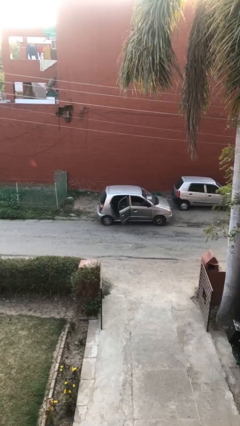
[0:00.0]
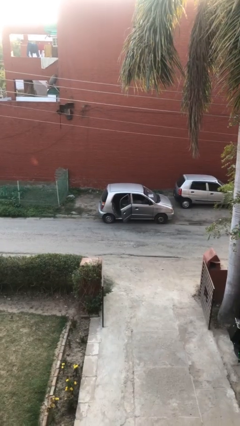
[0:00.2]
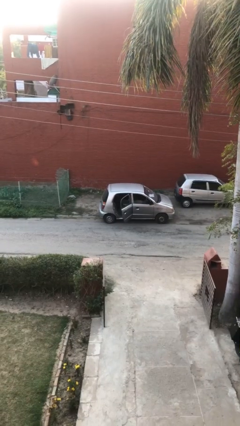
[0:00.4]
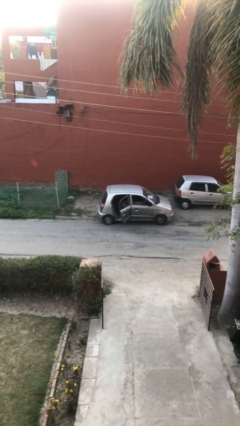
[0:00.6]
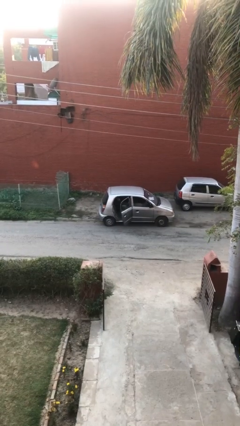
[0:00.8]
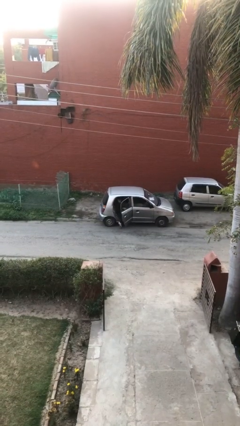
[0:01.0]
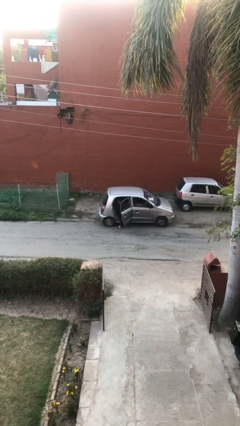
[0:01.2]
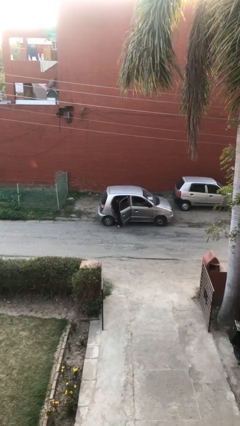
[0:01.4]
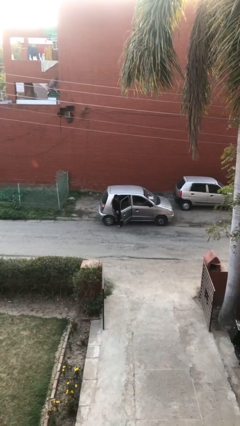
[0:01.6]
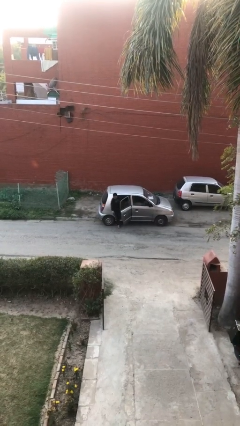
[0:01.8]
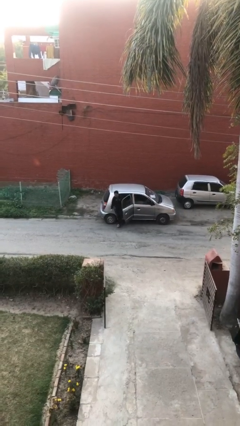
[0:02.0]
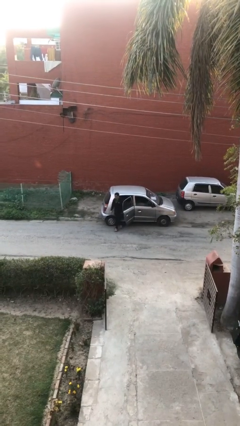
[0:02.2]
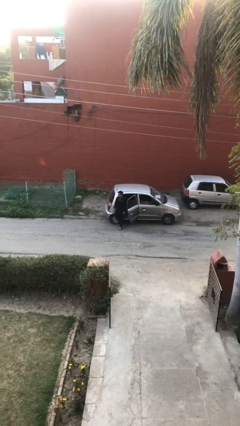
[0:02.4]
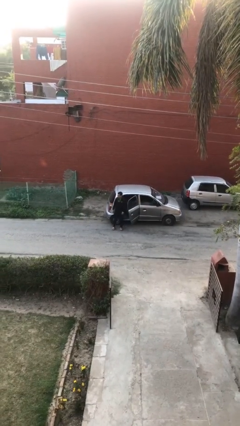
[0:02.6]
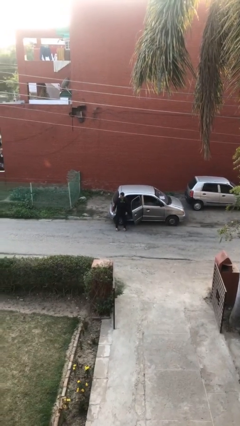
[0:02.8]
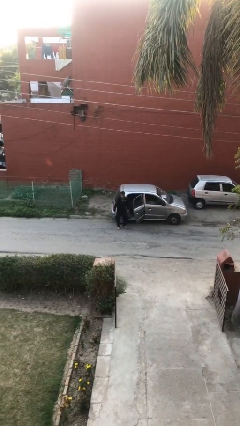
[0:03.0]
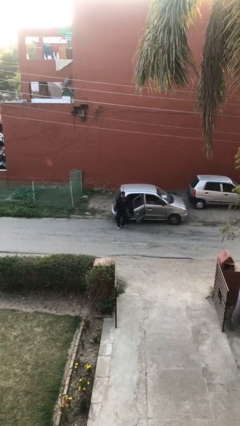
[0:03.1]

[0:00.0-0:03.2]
person exits car

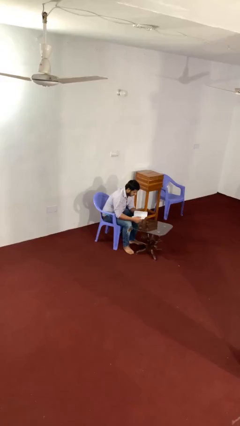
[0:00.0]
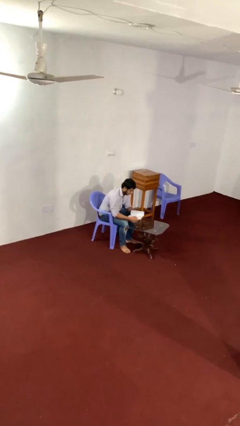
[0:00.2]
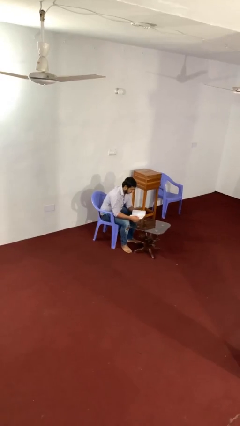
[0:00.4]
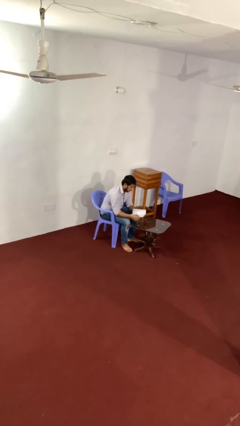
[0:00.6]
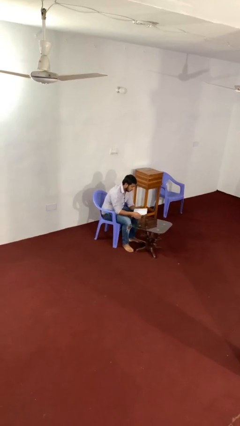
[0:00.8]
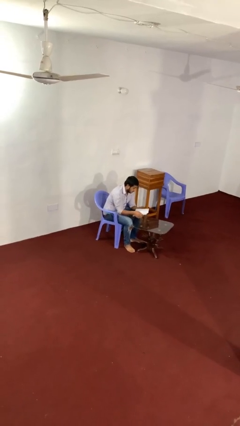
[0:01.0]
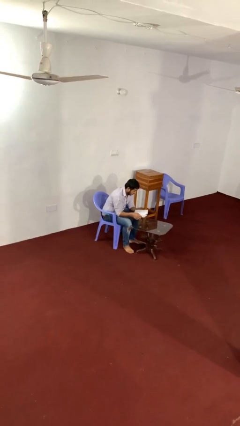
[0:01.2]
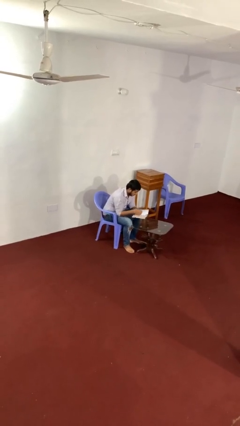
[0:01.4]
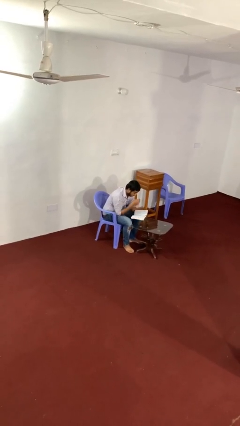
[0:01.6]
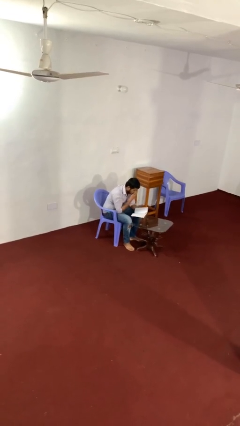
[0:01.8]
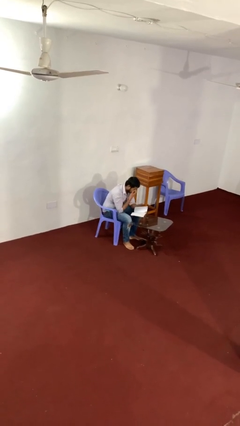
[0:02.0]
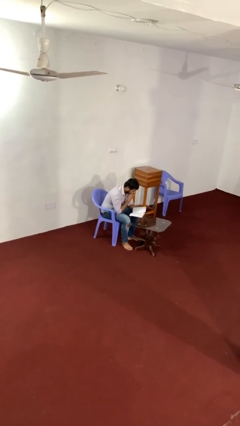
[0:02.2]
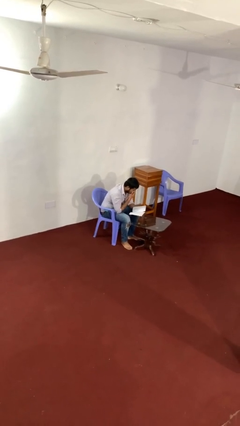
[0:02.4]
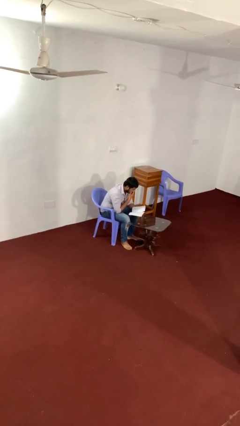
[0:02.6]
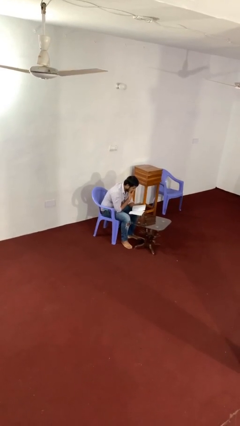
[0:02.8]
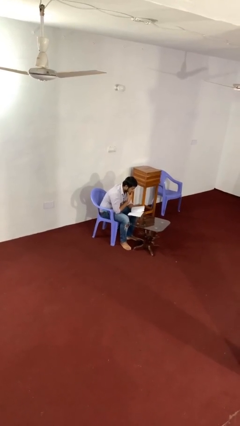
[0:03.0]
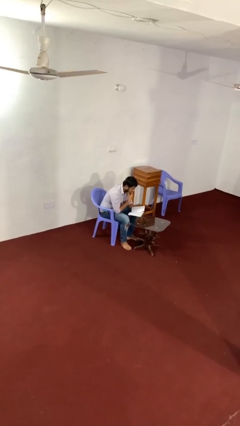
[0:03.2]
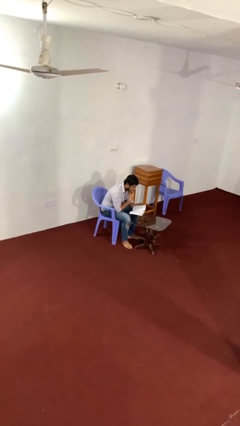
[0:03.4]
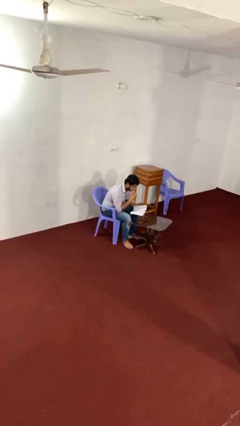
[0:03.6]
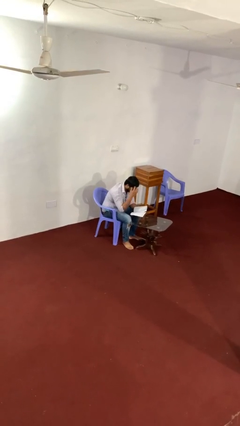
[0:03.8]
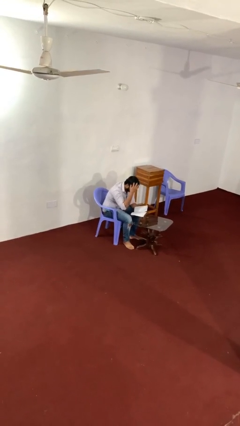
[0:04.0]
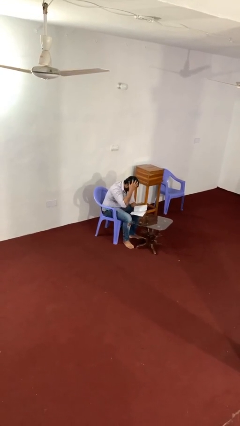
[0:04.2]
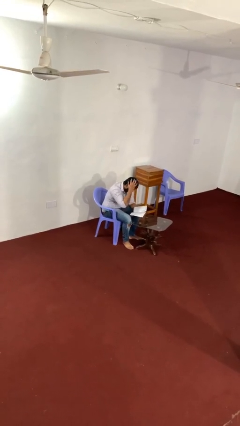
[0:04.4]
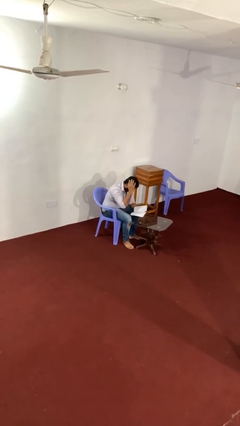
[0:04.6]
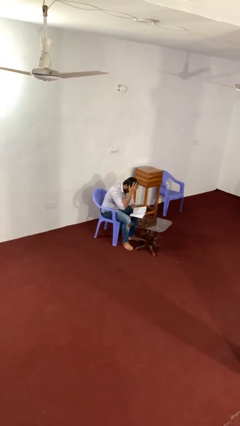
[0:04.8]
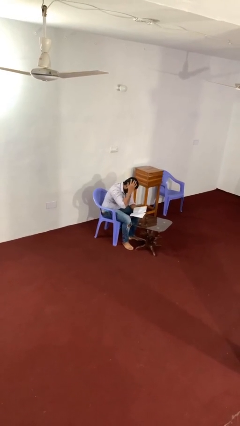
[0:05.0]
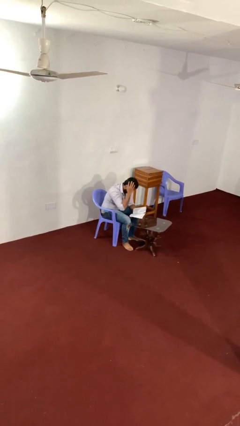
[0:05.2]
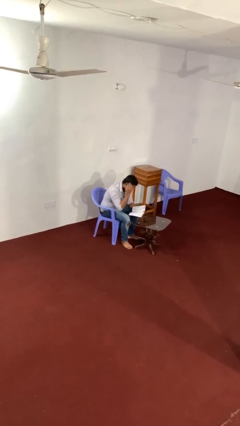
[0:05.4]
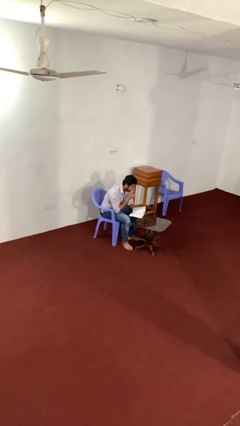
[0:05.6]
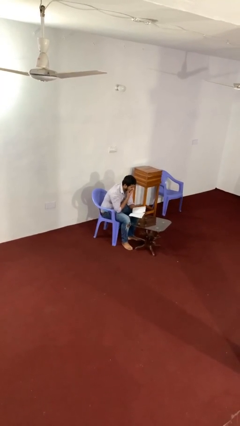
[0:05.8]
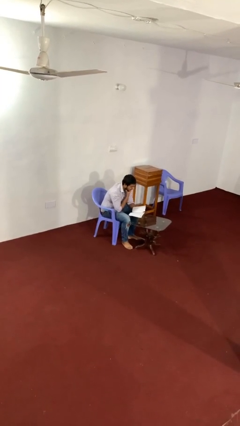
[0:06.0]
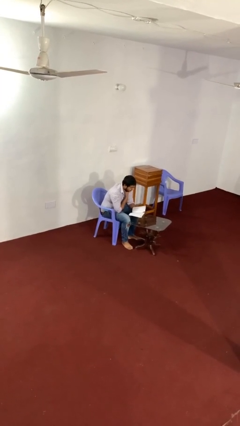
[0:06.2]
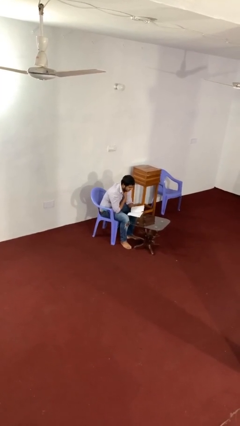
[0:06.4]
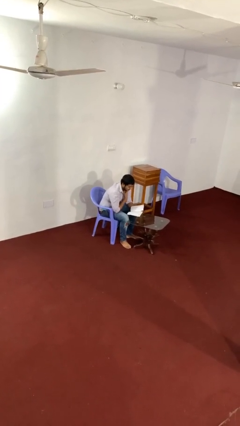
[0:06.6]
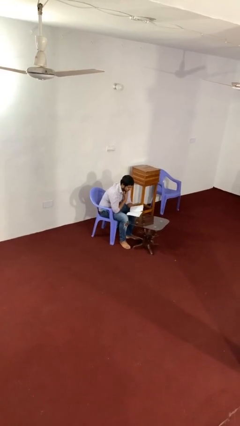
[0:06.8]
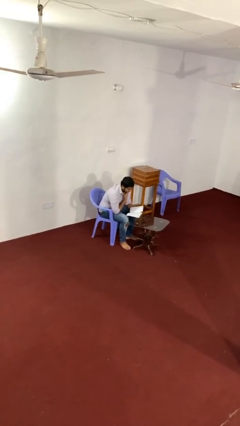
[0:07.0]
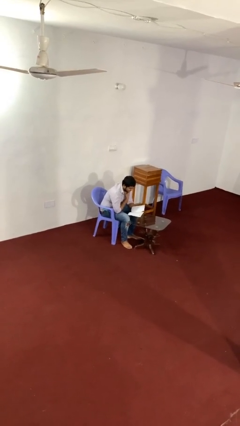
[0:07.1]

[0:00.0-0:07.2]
person reads document

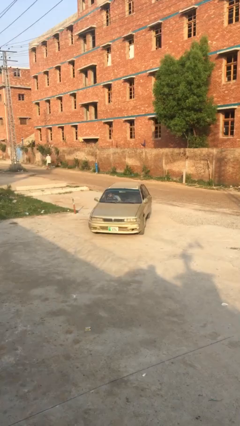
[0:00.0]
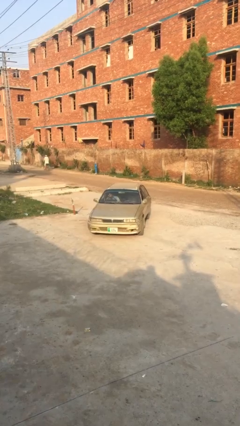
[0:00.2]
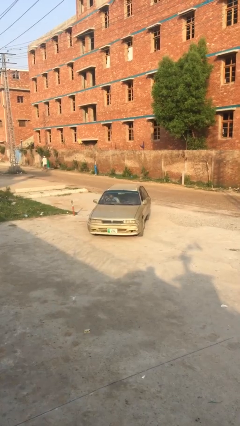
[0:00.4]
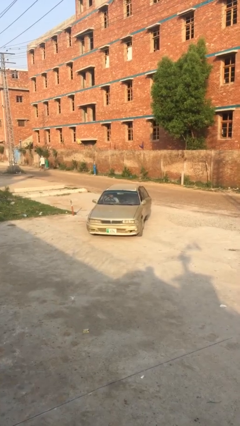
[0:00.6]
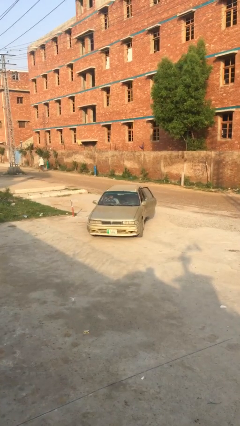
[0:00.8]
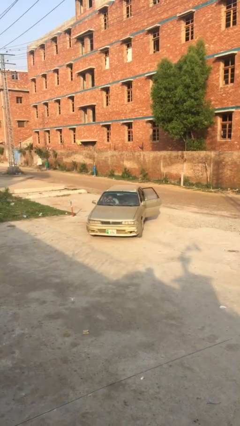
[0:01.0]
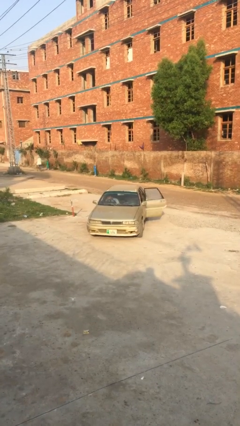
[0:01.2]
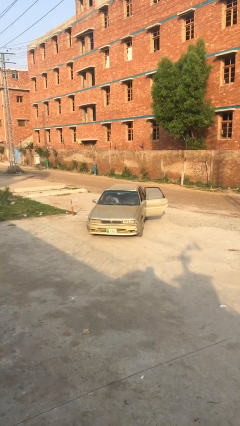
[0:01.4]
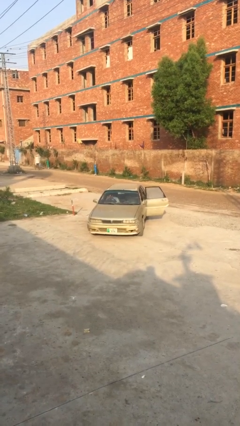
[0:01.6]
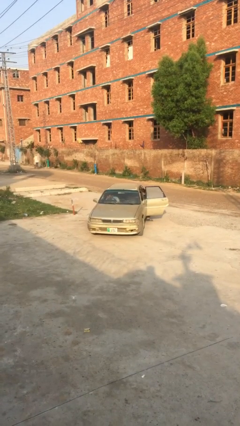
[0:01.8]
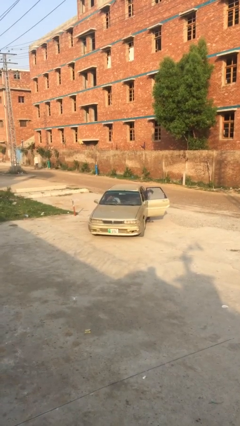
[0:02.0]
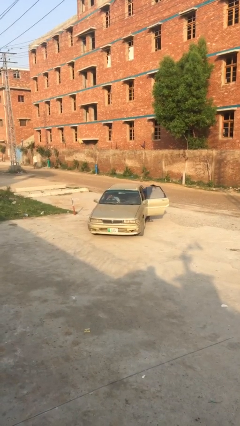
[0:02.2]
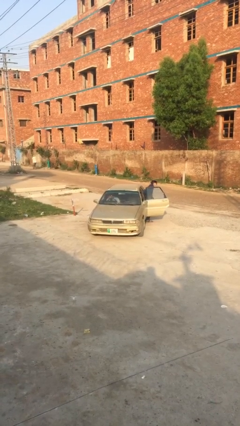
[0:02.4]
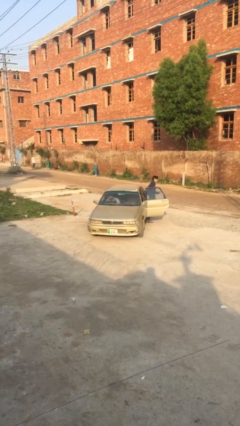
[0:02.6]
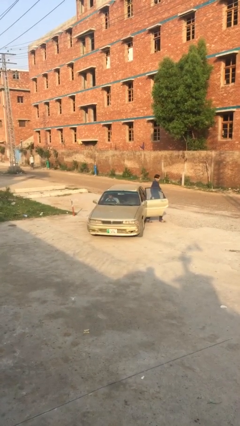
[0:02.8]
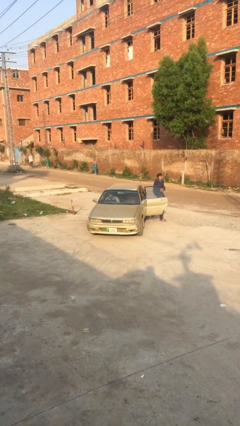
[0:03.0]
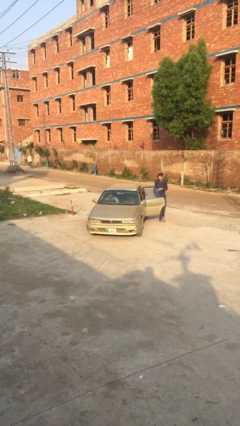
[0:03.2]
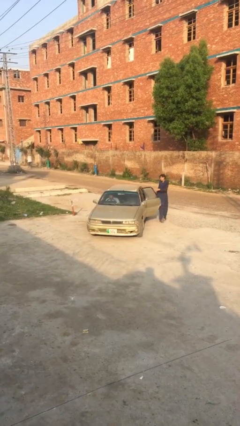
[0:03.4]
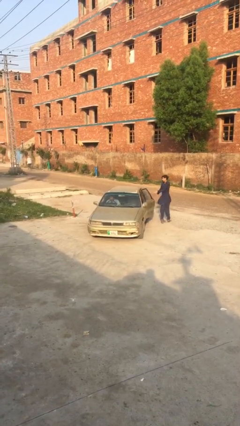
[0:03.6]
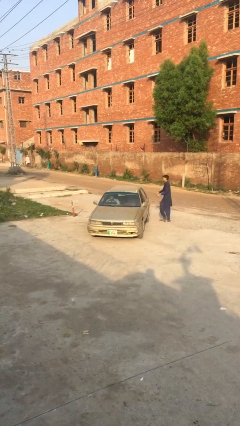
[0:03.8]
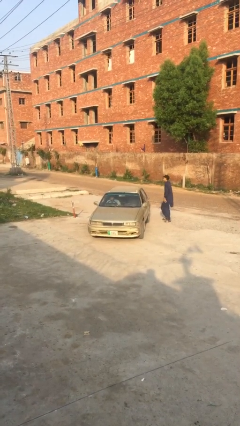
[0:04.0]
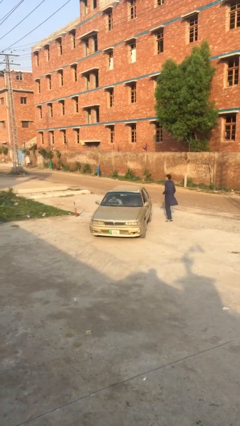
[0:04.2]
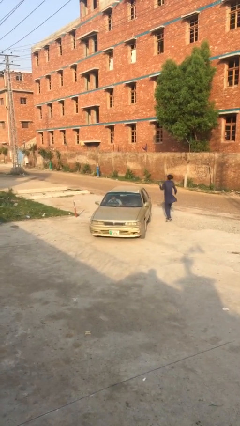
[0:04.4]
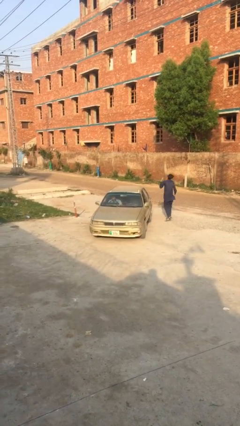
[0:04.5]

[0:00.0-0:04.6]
car drops off person

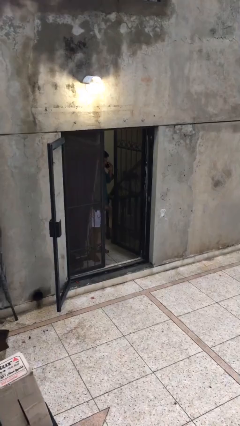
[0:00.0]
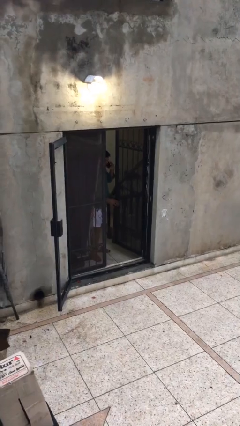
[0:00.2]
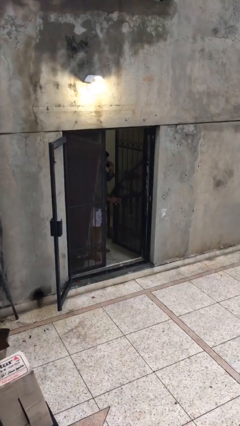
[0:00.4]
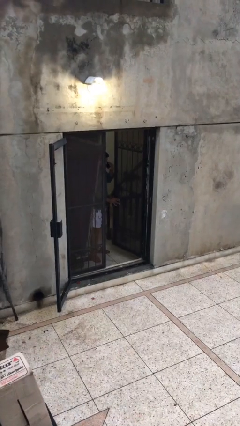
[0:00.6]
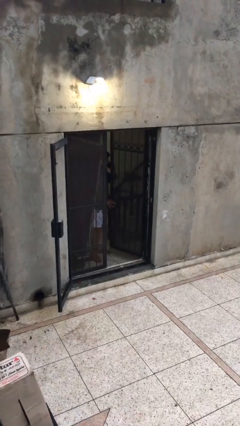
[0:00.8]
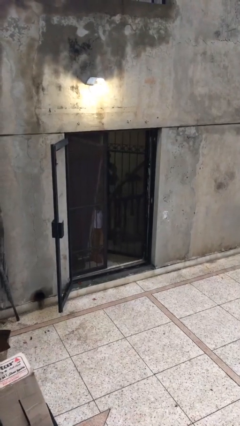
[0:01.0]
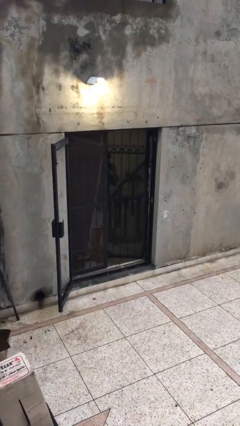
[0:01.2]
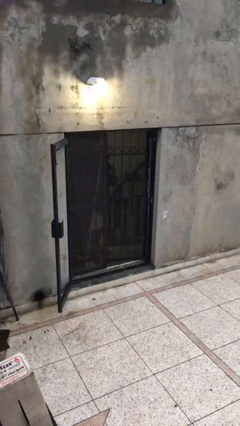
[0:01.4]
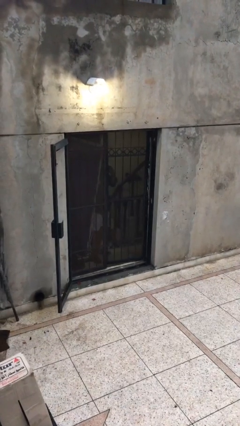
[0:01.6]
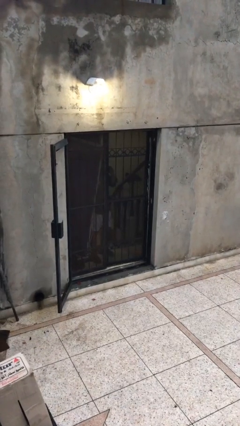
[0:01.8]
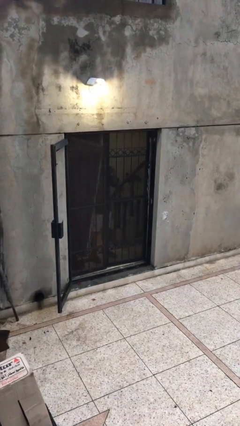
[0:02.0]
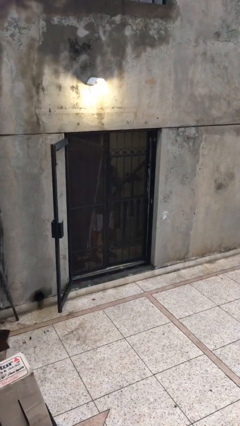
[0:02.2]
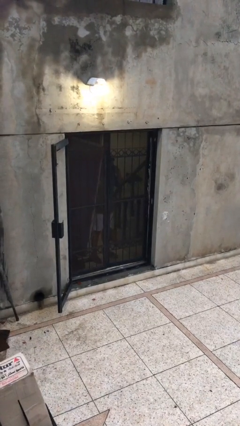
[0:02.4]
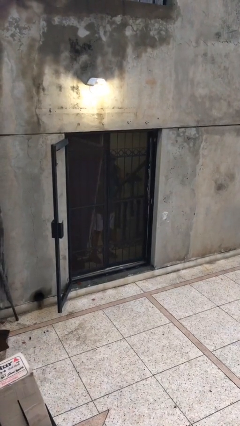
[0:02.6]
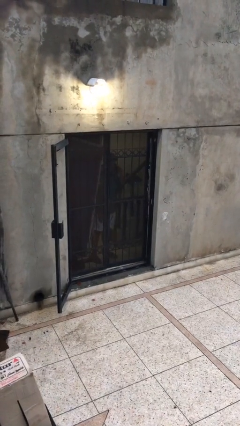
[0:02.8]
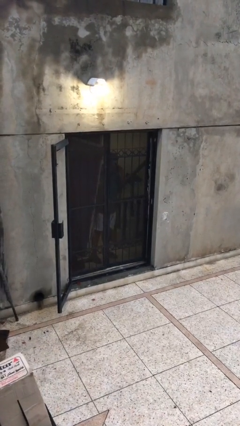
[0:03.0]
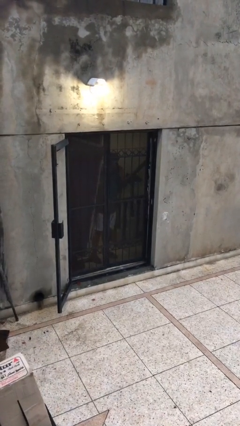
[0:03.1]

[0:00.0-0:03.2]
person closes facility door
